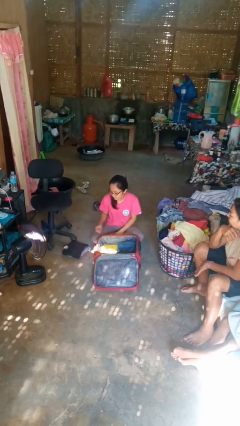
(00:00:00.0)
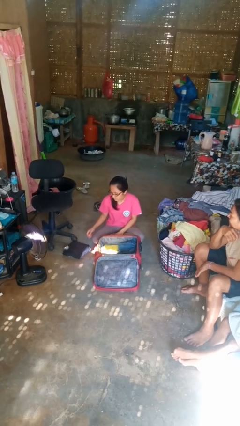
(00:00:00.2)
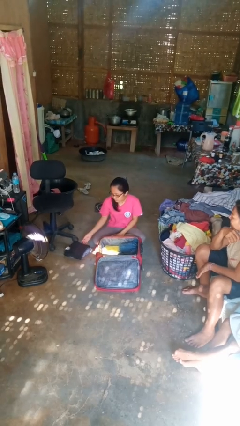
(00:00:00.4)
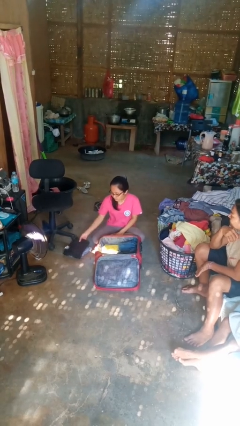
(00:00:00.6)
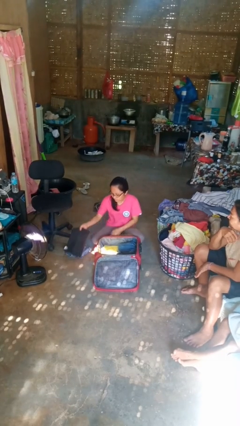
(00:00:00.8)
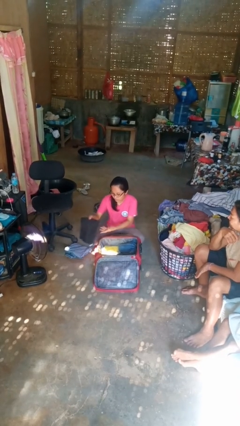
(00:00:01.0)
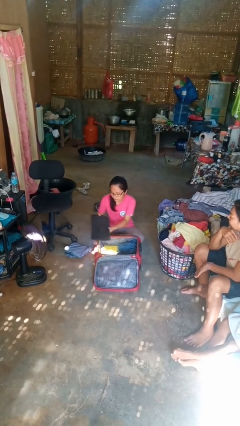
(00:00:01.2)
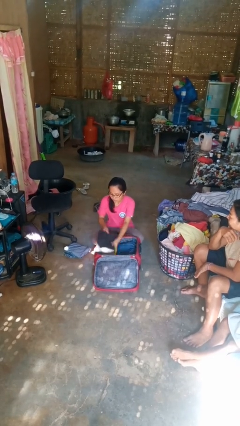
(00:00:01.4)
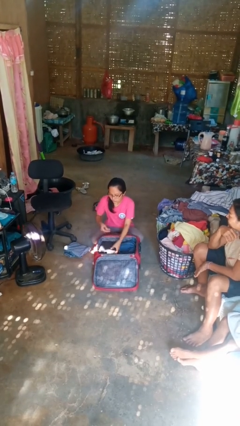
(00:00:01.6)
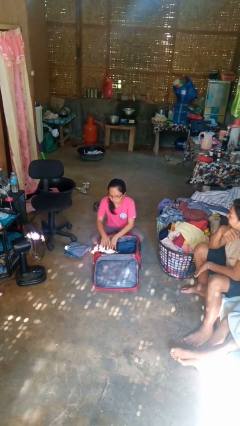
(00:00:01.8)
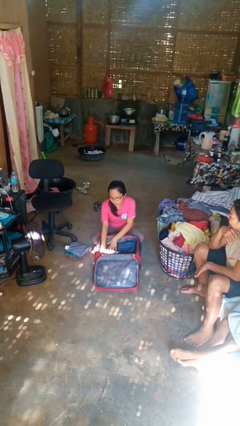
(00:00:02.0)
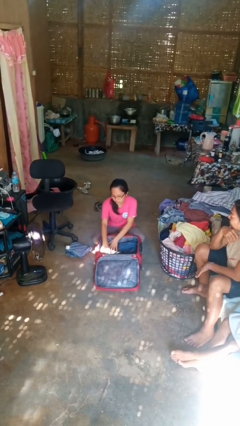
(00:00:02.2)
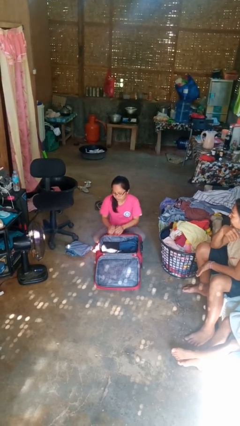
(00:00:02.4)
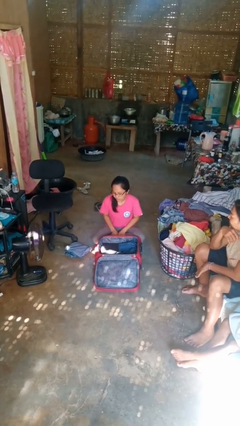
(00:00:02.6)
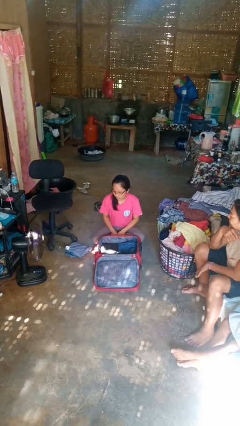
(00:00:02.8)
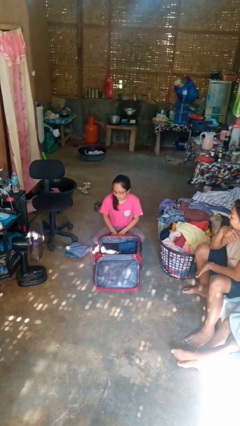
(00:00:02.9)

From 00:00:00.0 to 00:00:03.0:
person loads clothes into suitcase

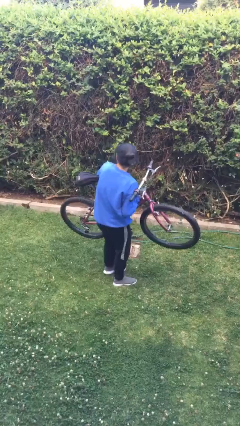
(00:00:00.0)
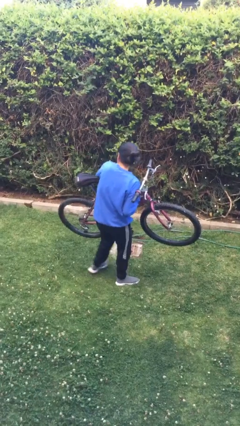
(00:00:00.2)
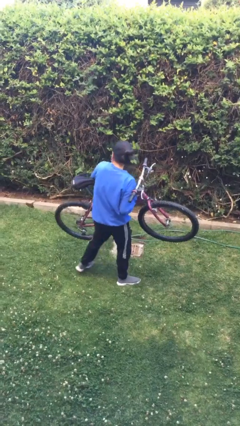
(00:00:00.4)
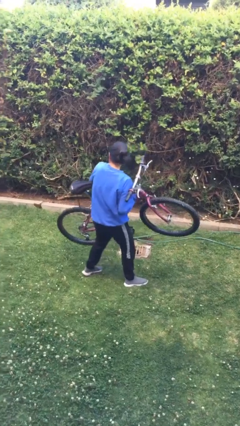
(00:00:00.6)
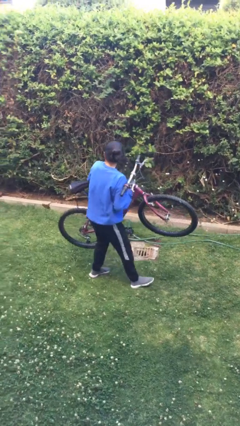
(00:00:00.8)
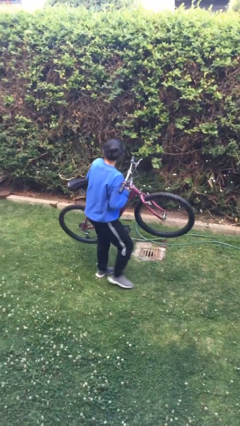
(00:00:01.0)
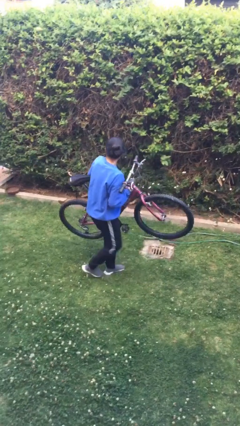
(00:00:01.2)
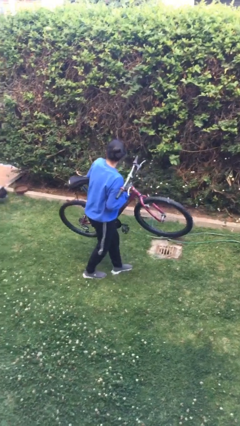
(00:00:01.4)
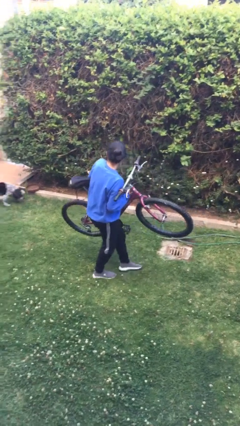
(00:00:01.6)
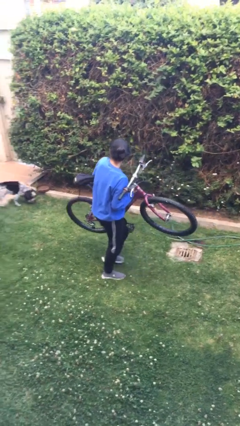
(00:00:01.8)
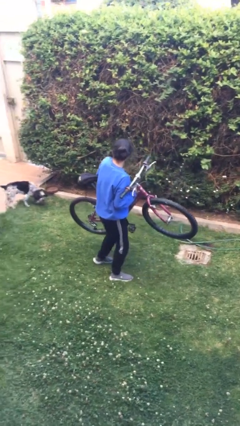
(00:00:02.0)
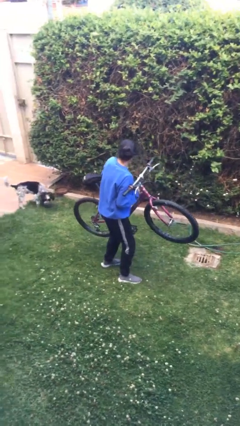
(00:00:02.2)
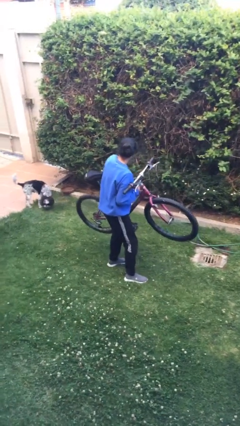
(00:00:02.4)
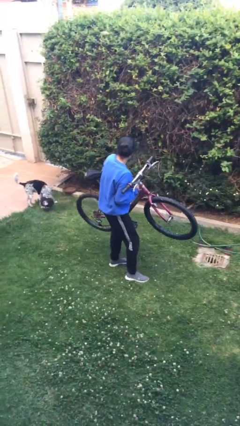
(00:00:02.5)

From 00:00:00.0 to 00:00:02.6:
person carries bicycle

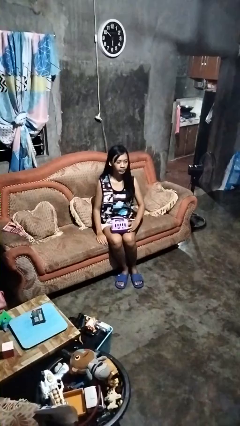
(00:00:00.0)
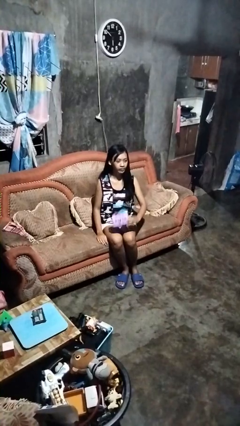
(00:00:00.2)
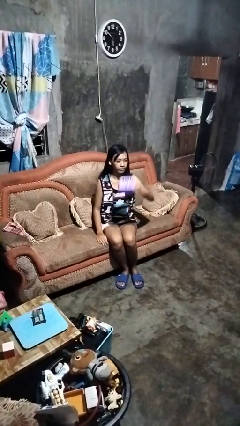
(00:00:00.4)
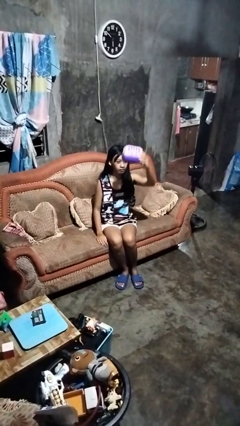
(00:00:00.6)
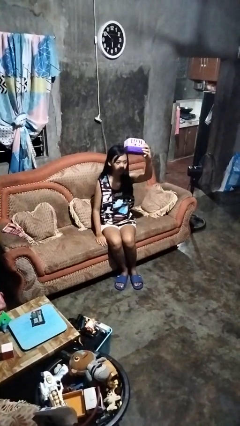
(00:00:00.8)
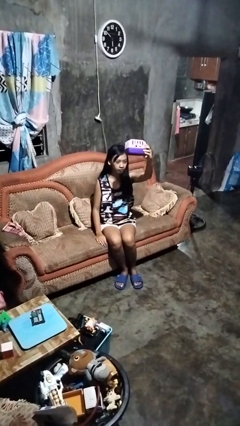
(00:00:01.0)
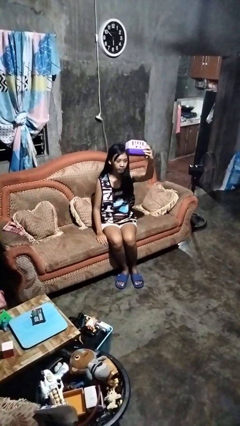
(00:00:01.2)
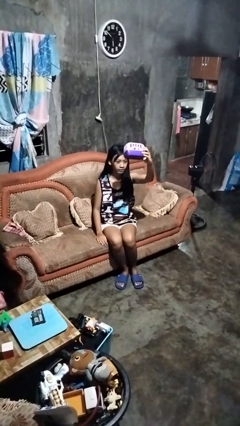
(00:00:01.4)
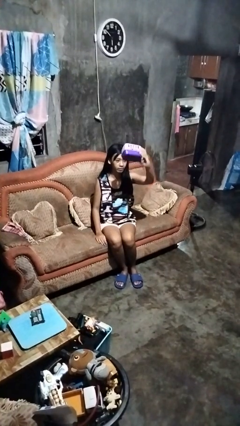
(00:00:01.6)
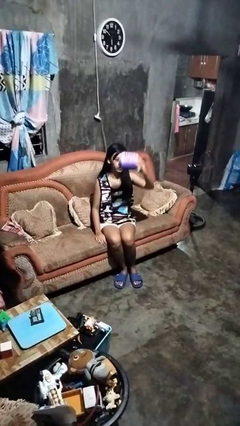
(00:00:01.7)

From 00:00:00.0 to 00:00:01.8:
person holds object above head

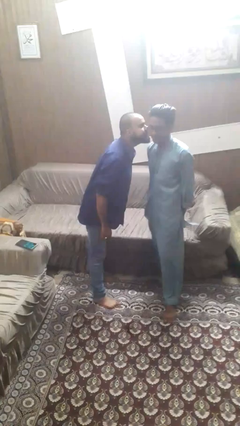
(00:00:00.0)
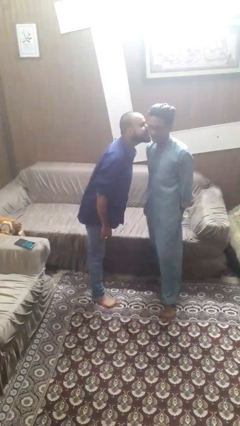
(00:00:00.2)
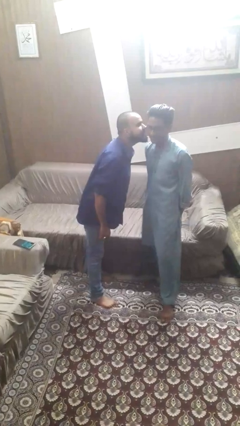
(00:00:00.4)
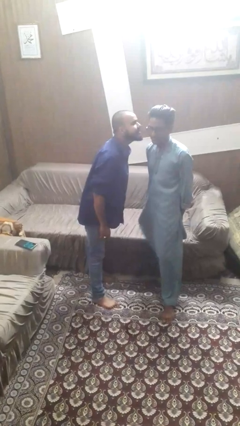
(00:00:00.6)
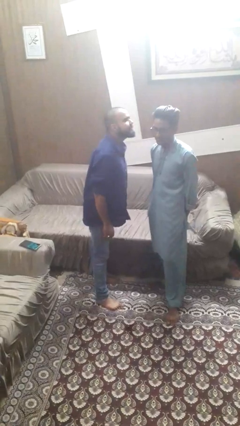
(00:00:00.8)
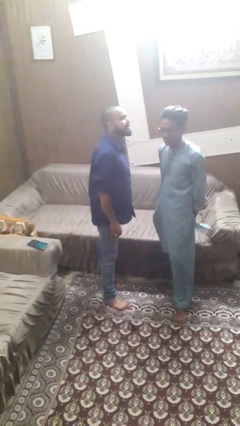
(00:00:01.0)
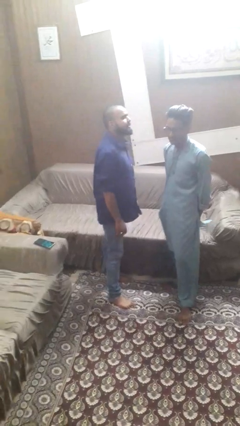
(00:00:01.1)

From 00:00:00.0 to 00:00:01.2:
person kisses cheek of person

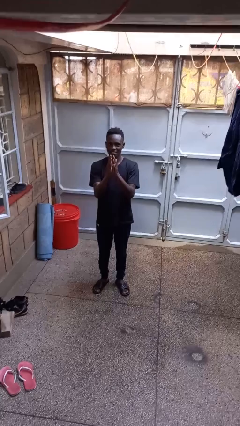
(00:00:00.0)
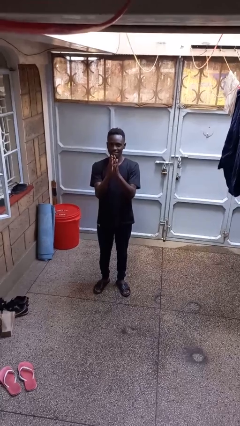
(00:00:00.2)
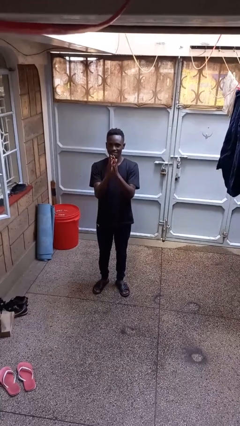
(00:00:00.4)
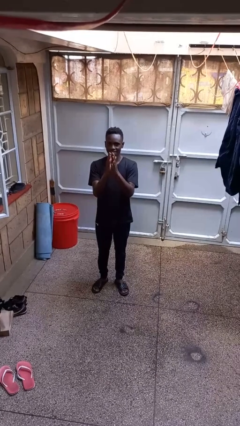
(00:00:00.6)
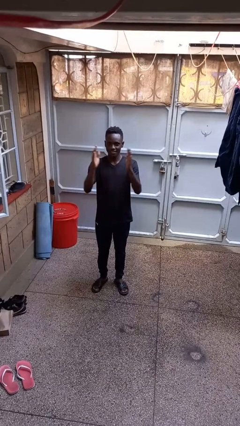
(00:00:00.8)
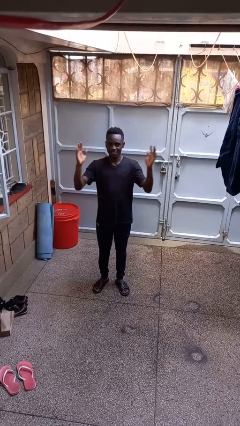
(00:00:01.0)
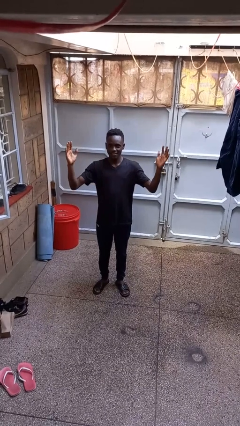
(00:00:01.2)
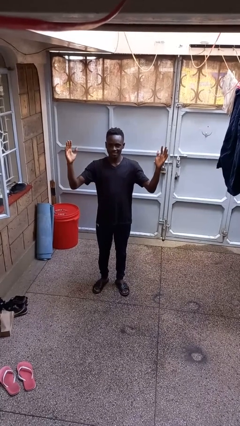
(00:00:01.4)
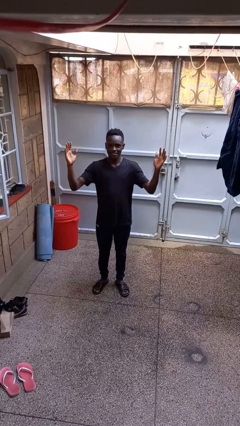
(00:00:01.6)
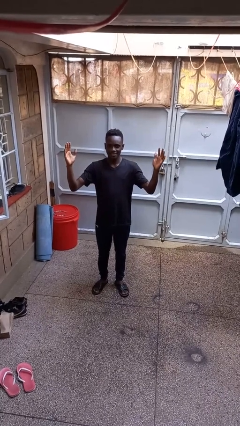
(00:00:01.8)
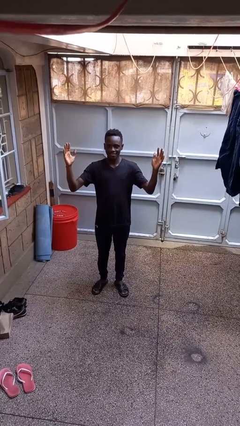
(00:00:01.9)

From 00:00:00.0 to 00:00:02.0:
person gestures zoom out

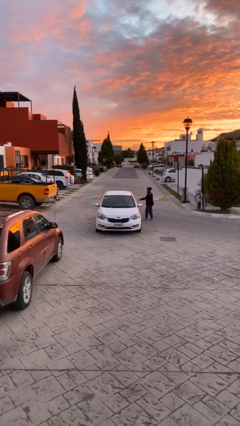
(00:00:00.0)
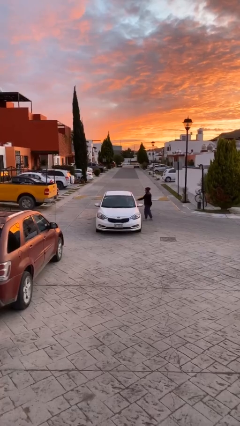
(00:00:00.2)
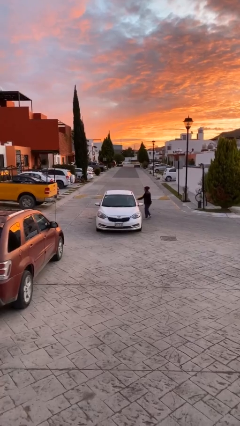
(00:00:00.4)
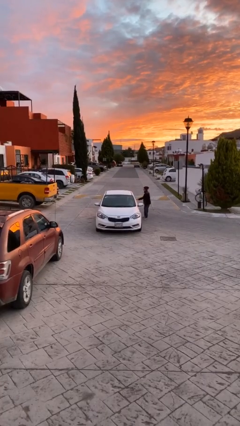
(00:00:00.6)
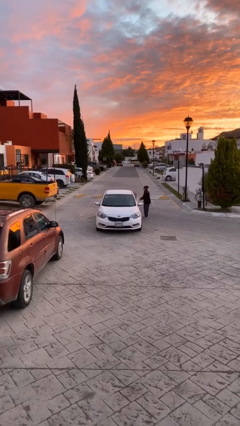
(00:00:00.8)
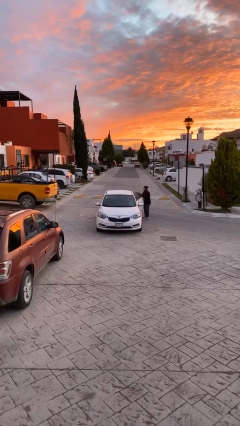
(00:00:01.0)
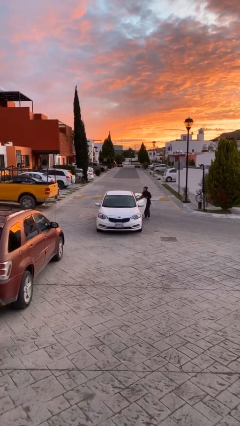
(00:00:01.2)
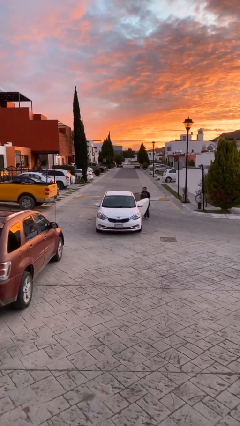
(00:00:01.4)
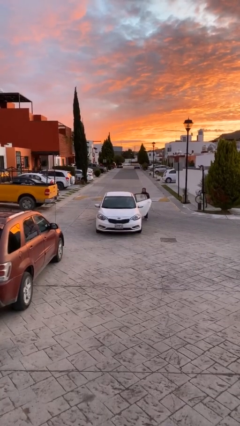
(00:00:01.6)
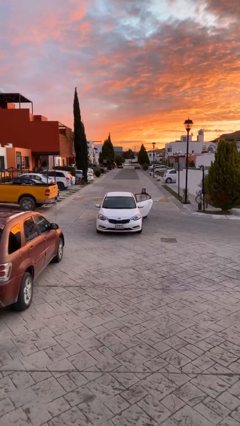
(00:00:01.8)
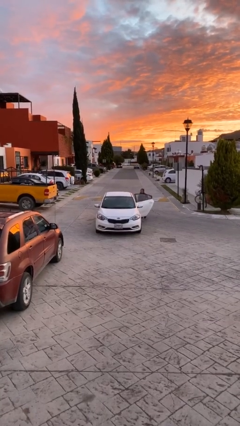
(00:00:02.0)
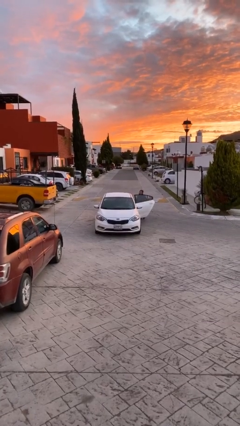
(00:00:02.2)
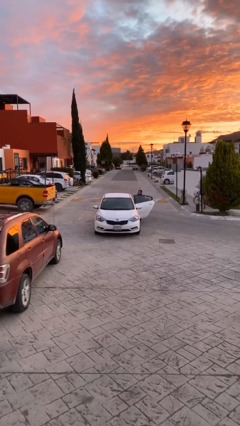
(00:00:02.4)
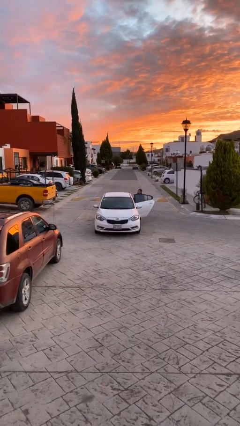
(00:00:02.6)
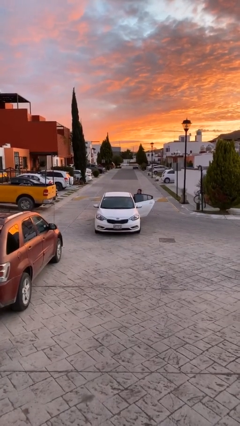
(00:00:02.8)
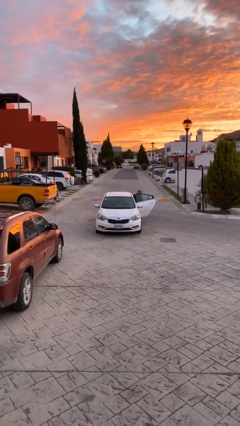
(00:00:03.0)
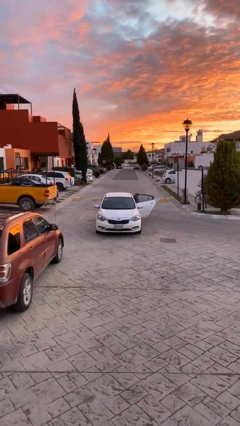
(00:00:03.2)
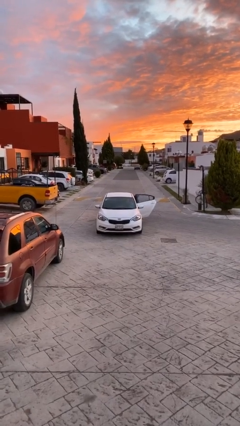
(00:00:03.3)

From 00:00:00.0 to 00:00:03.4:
car picks up person

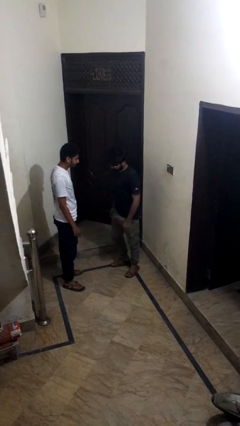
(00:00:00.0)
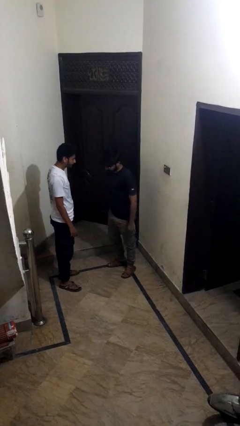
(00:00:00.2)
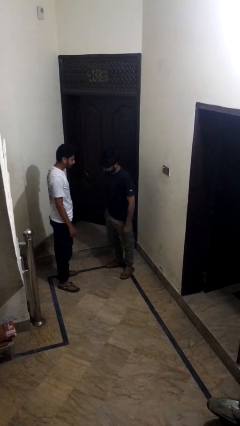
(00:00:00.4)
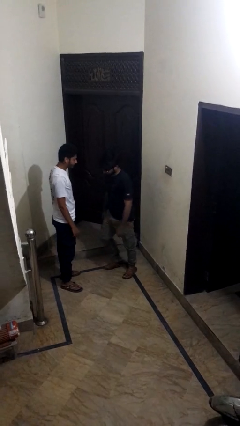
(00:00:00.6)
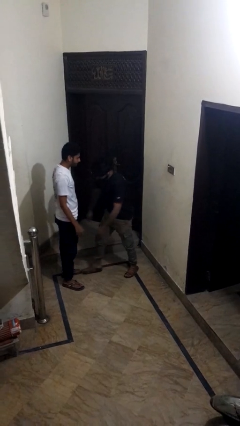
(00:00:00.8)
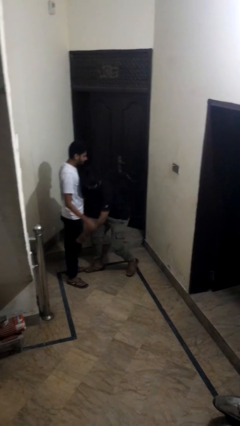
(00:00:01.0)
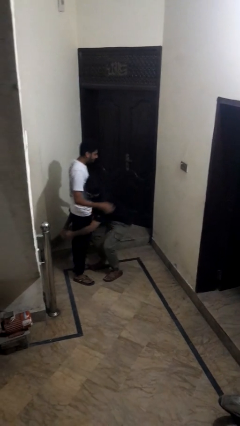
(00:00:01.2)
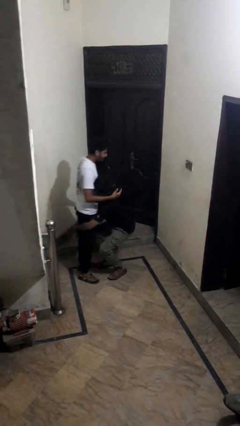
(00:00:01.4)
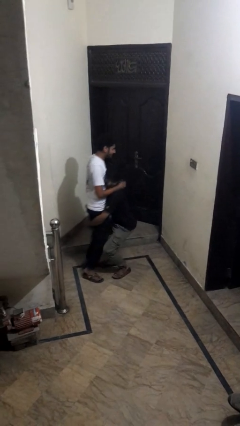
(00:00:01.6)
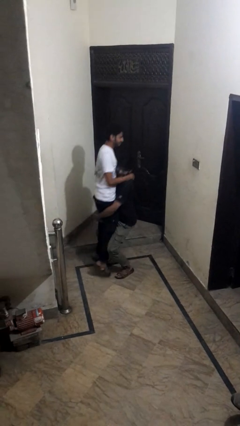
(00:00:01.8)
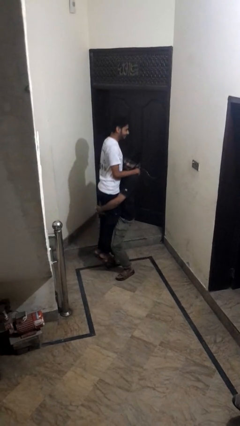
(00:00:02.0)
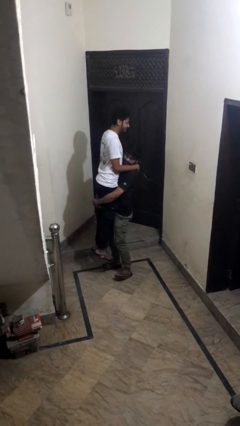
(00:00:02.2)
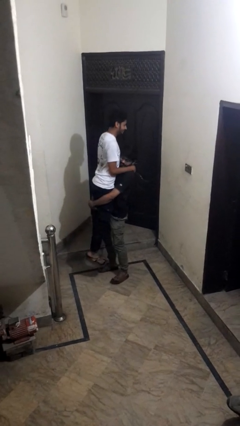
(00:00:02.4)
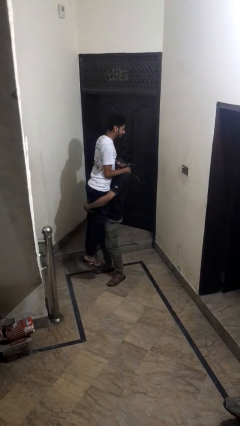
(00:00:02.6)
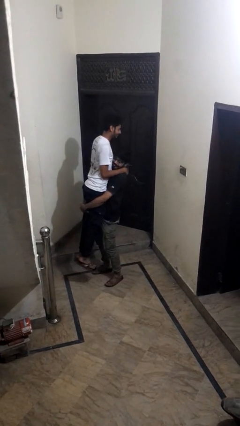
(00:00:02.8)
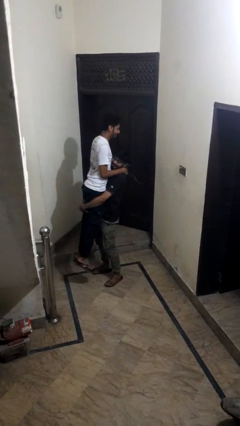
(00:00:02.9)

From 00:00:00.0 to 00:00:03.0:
person puts on hat
